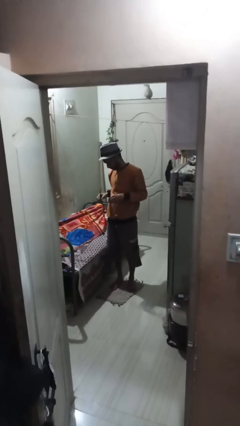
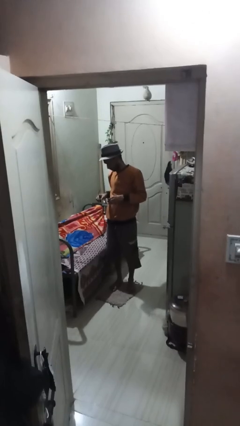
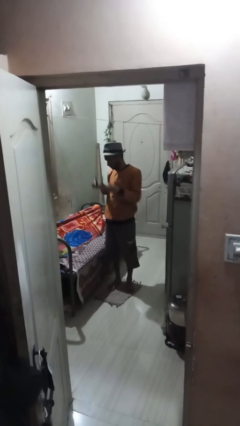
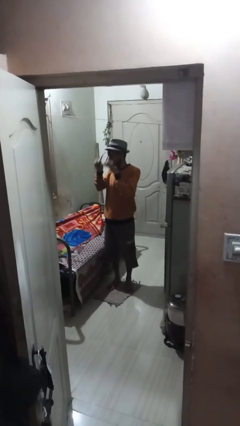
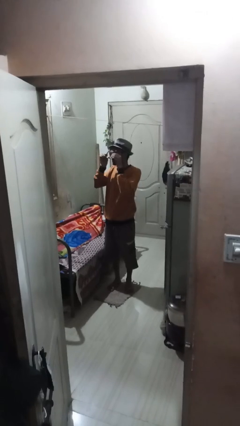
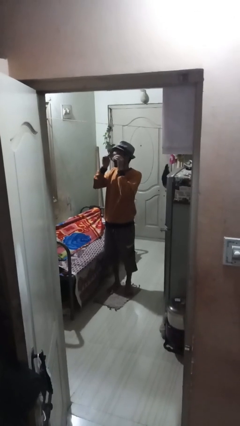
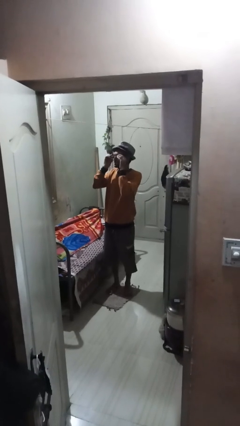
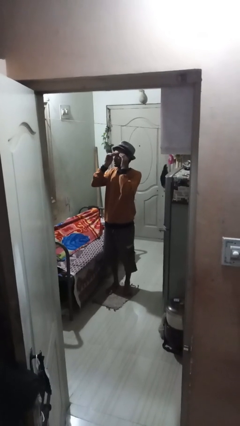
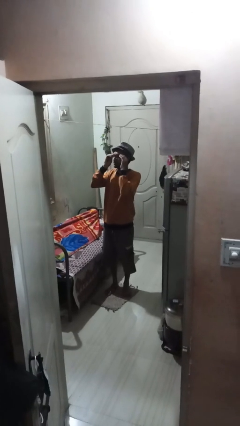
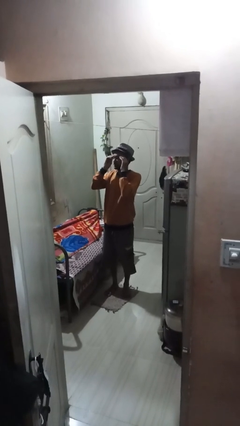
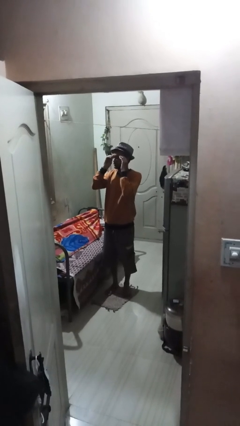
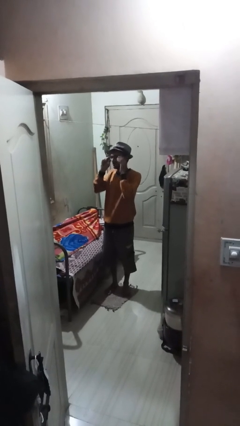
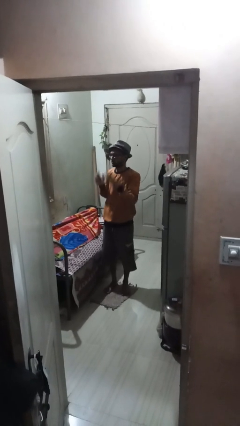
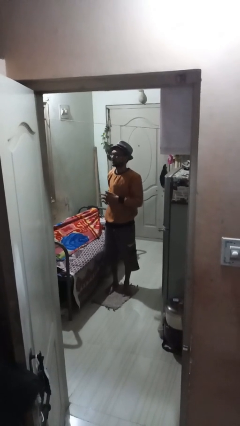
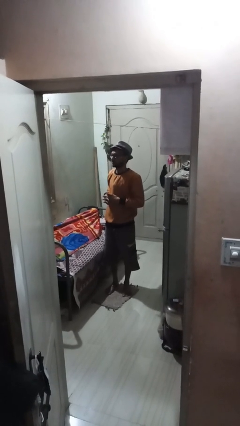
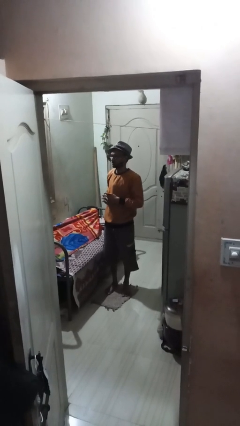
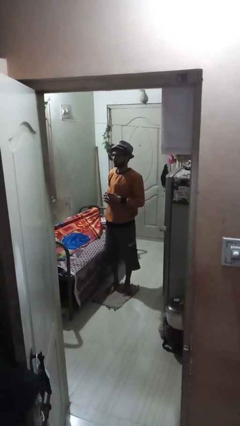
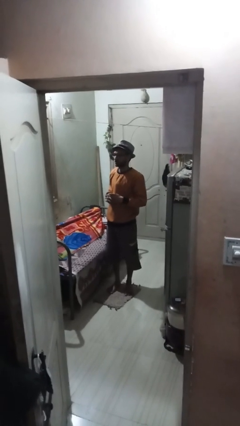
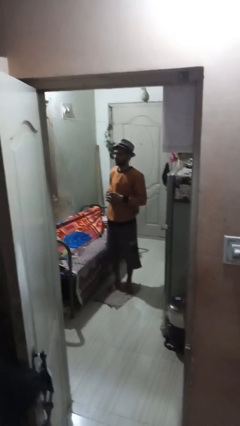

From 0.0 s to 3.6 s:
person puts on glasses

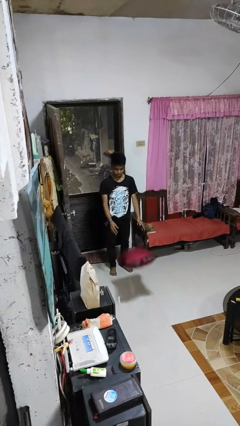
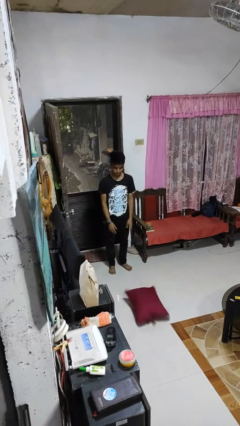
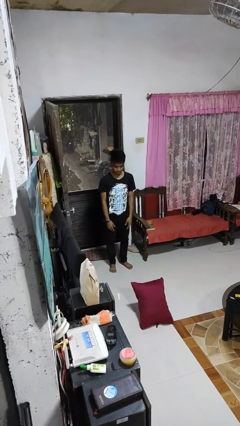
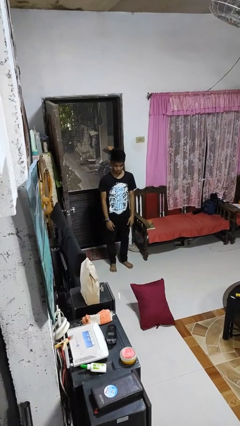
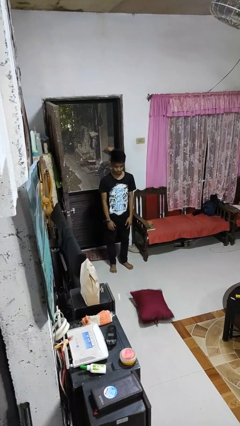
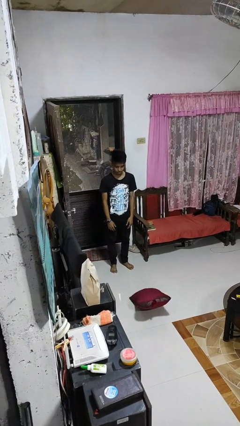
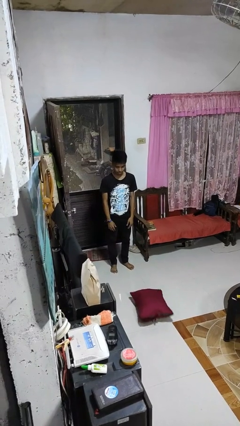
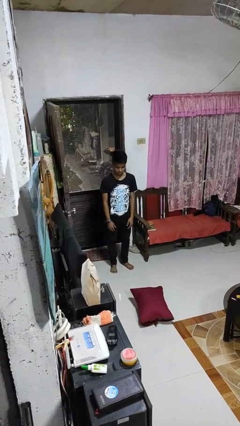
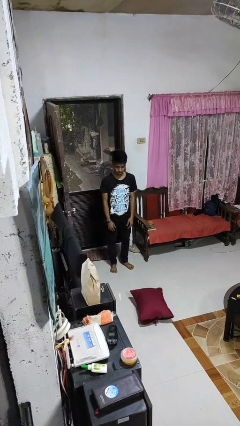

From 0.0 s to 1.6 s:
person throws object to ground

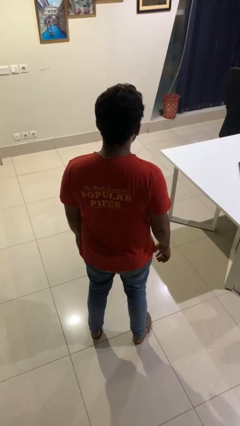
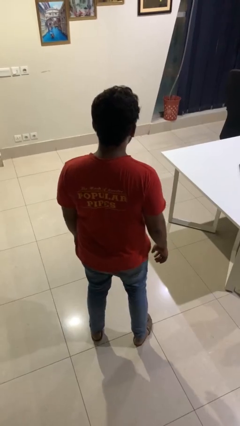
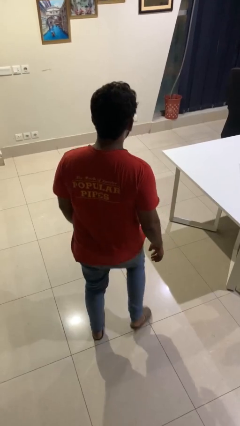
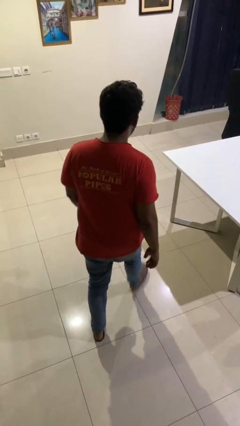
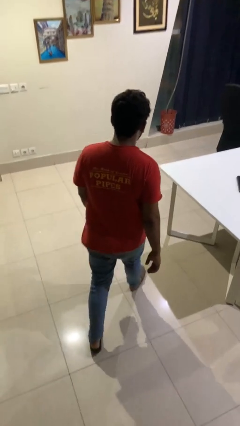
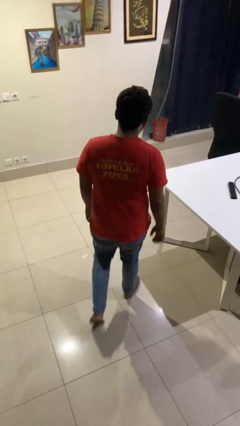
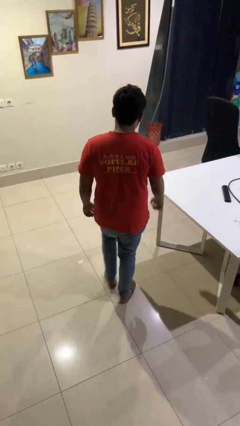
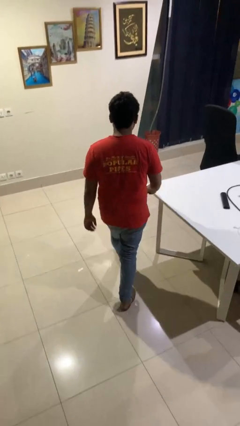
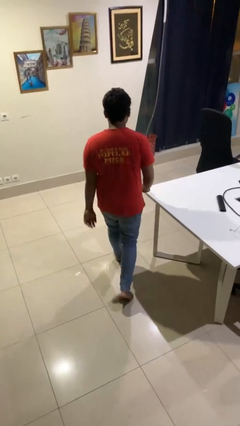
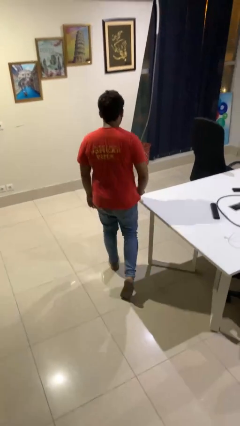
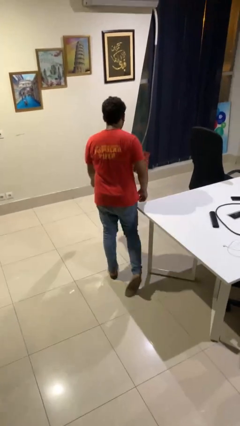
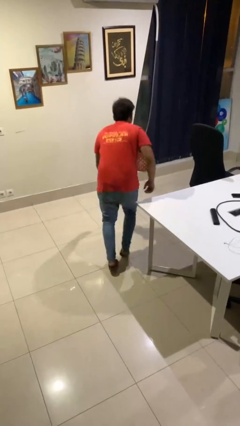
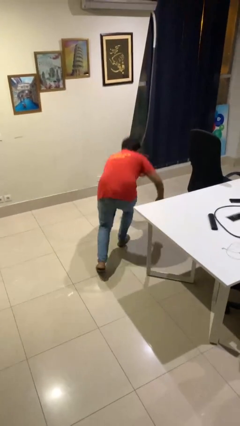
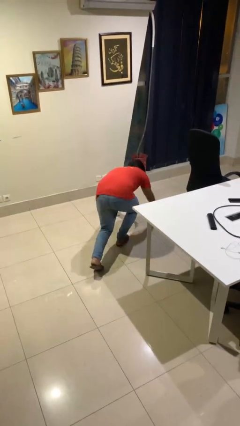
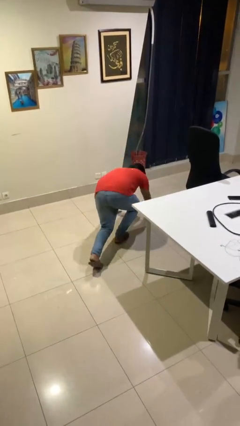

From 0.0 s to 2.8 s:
person trips on object on floor

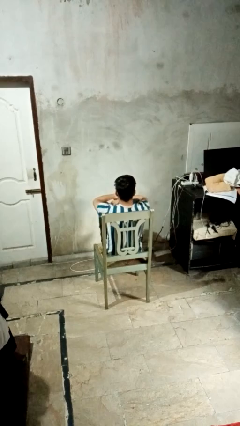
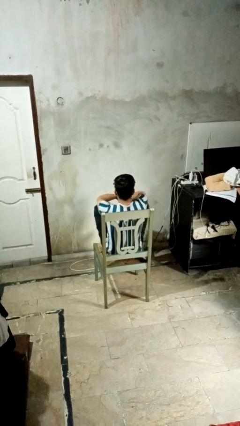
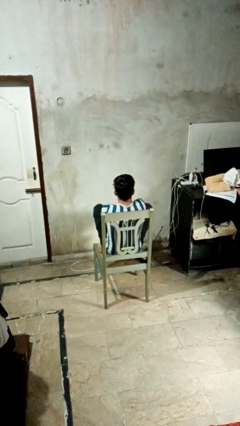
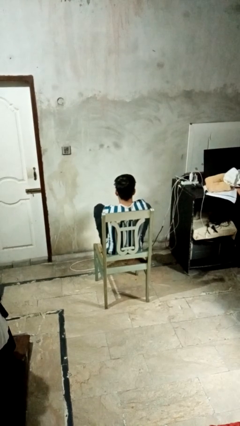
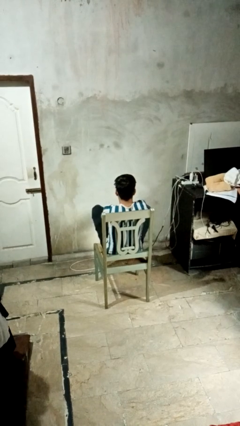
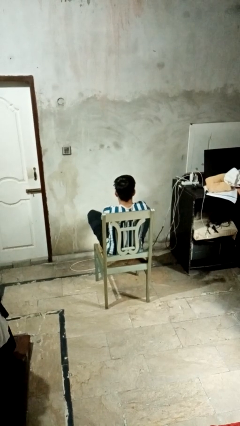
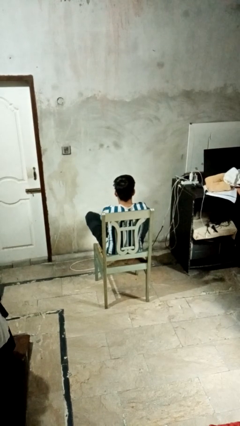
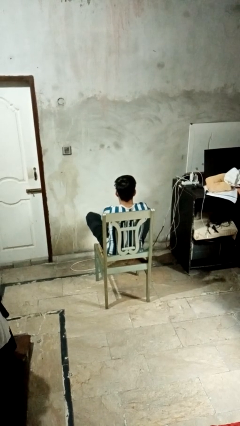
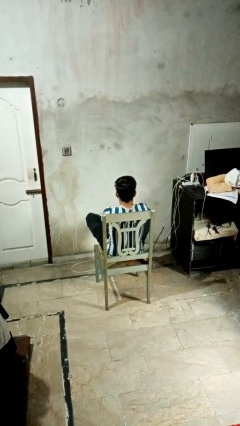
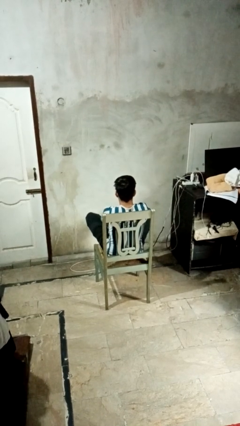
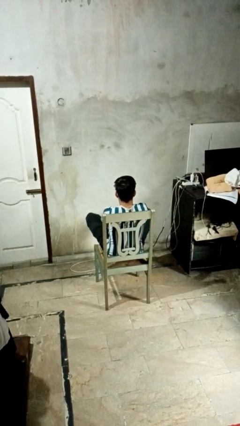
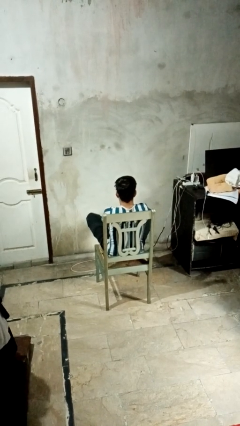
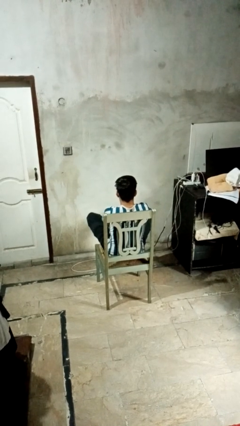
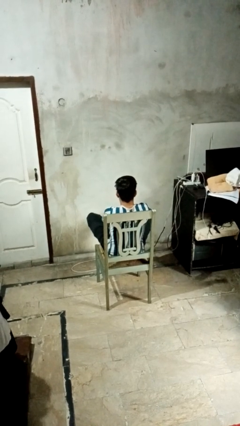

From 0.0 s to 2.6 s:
person crosses legs

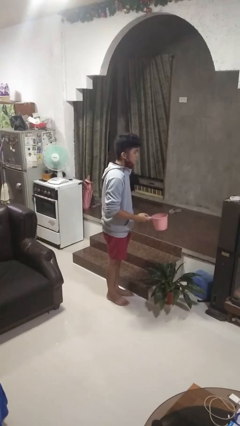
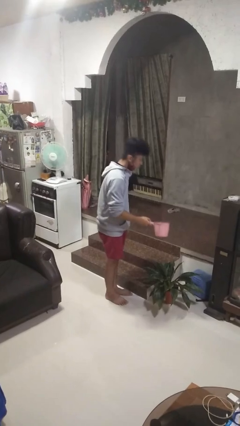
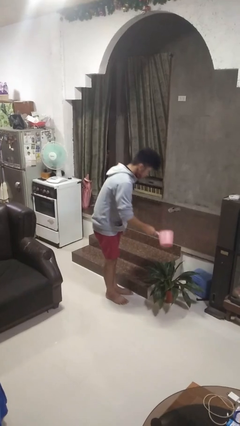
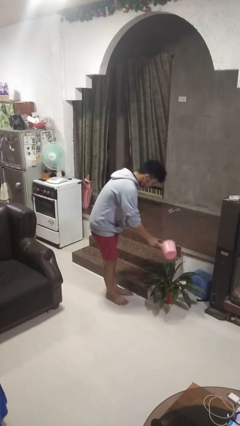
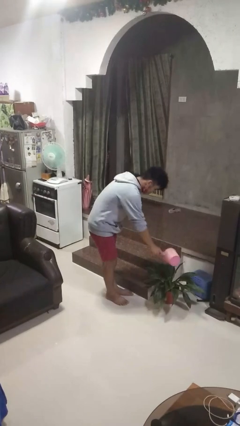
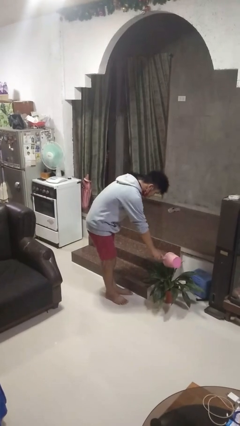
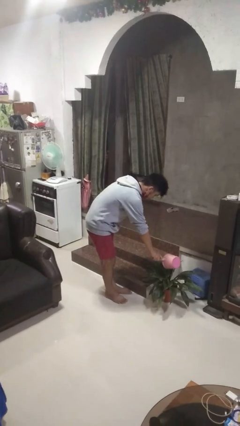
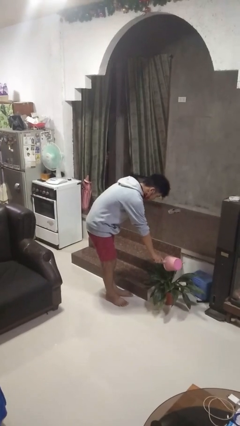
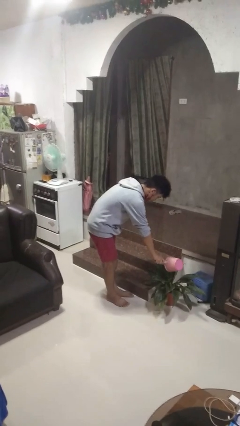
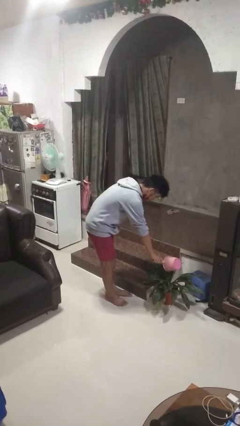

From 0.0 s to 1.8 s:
person waters houseplant

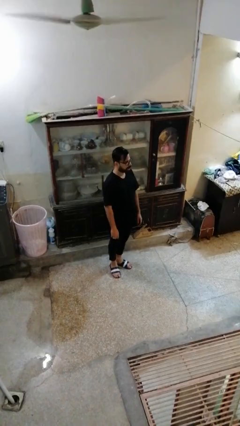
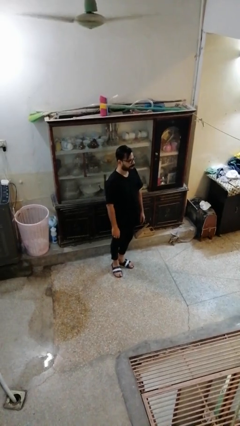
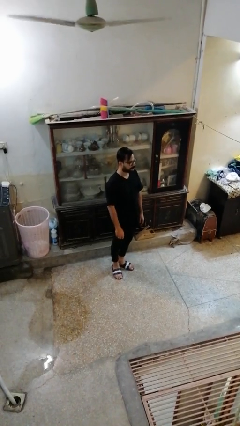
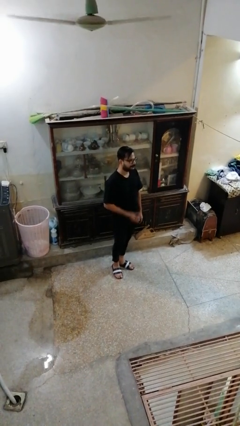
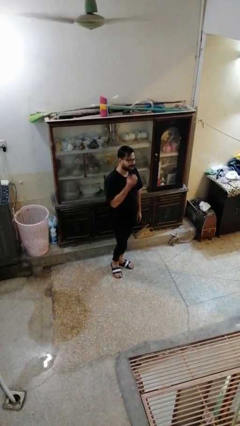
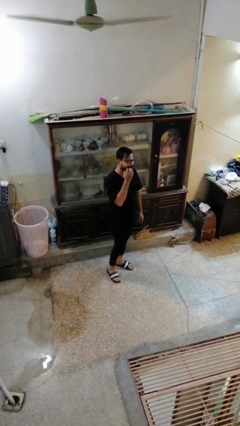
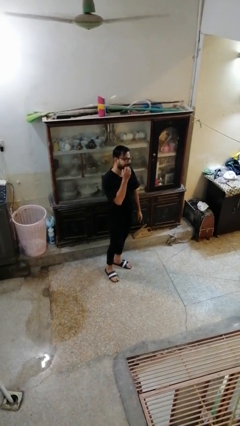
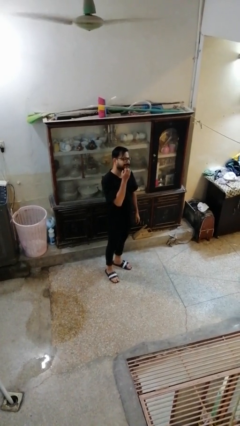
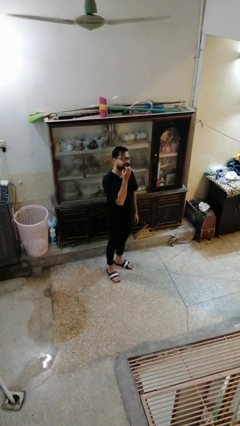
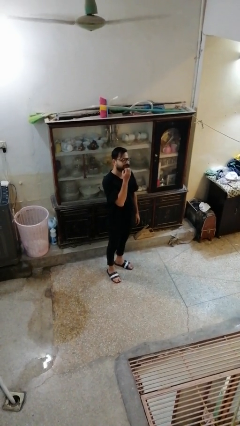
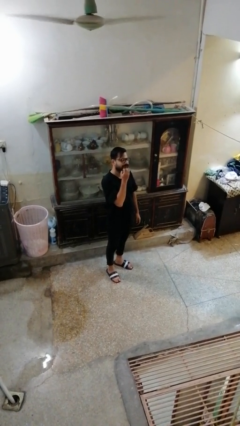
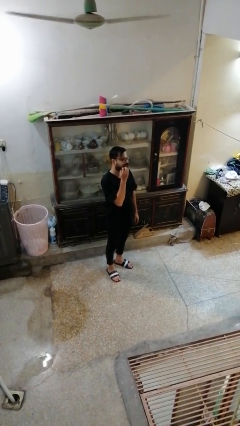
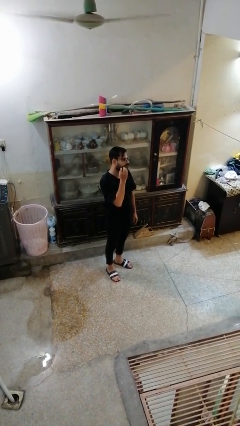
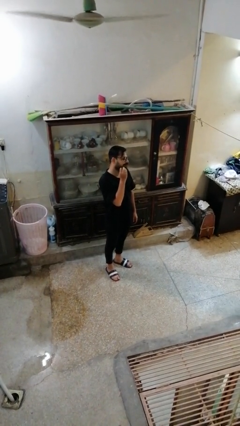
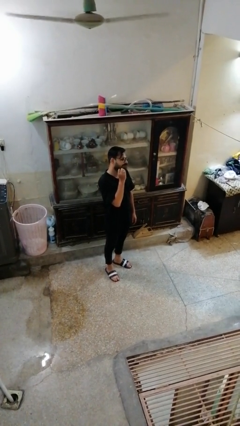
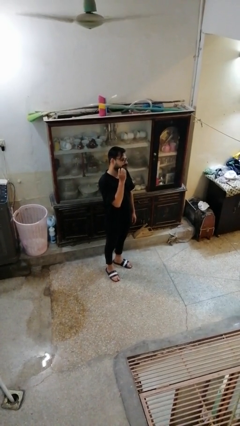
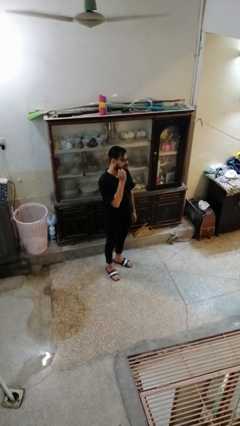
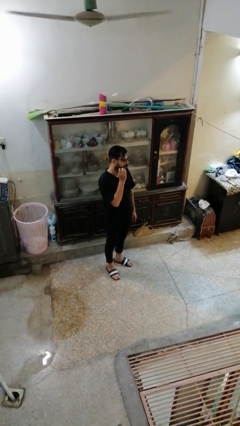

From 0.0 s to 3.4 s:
person scratches face

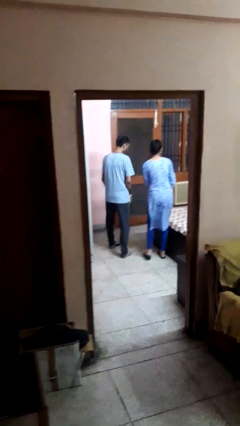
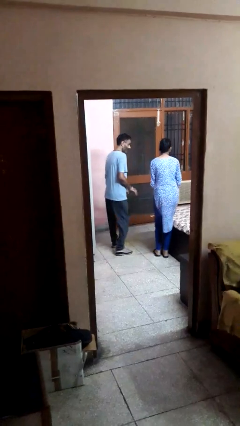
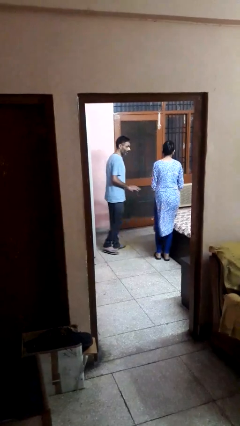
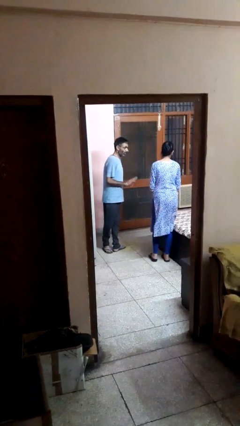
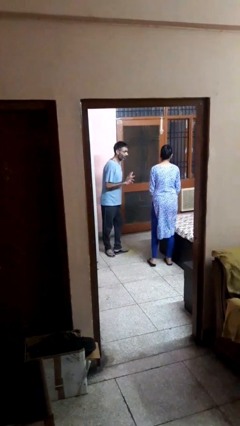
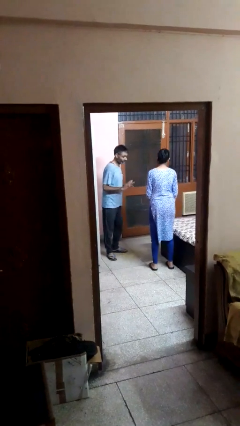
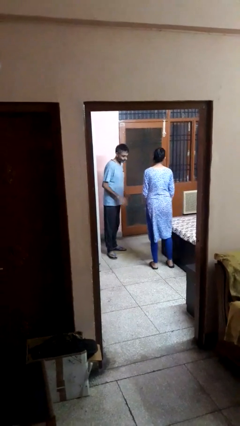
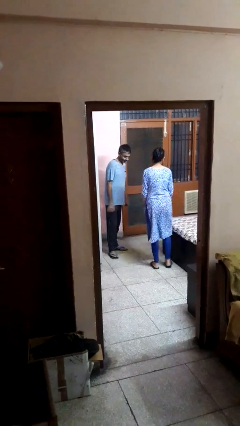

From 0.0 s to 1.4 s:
person bumps into person
